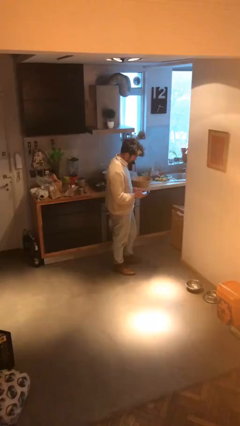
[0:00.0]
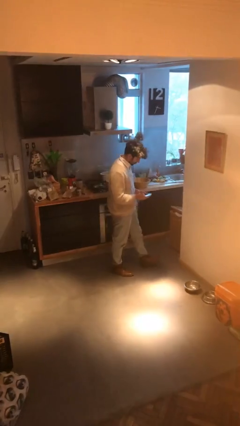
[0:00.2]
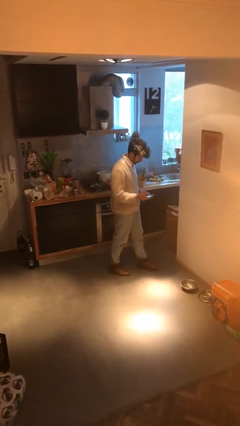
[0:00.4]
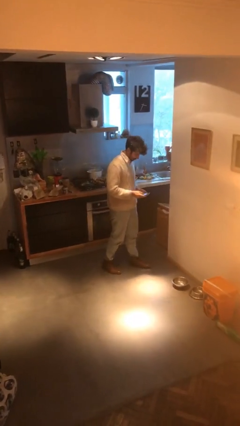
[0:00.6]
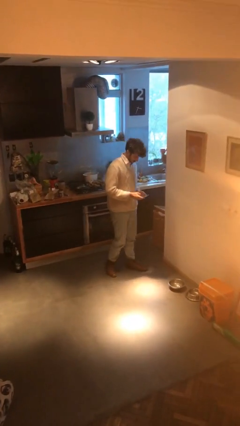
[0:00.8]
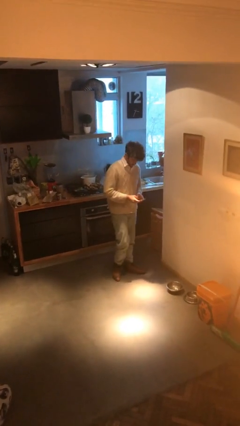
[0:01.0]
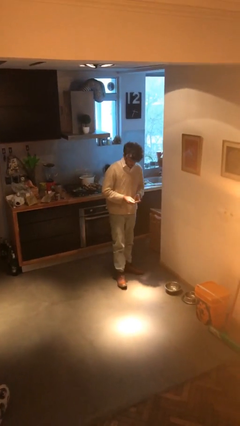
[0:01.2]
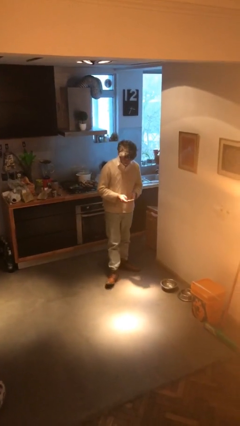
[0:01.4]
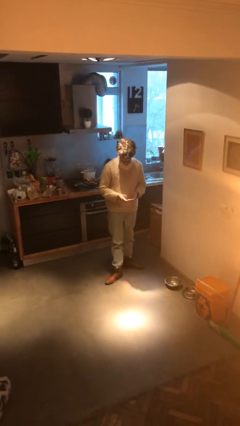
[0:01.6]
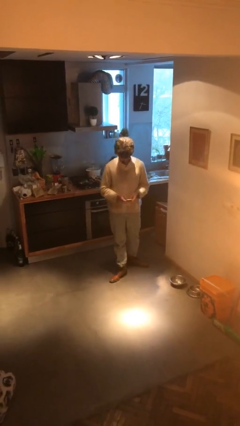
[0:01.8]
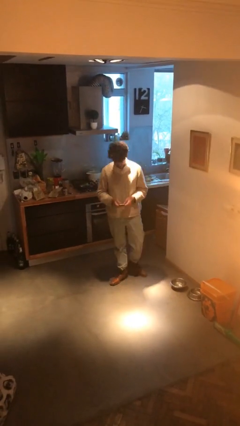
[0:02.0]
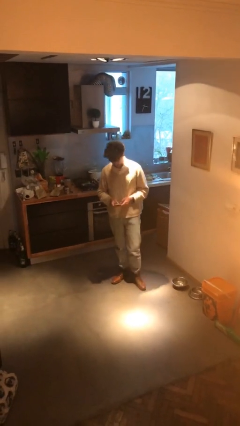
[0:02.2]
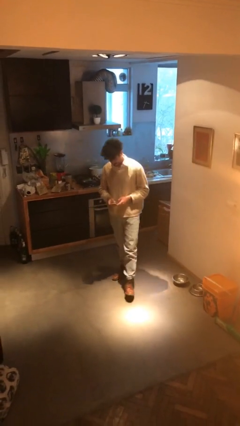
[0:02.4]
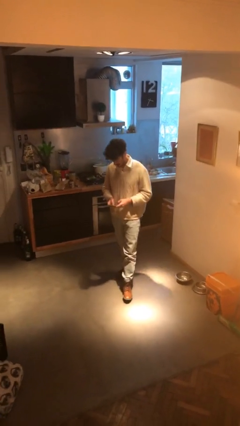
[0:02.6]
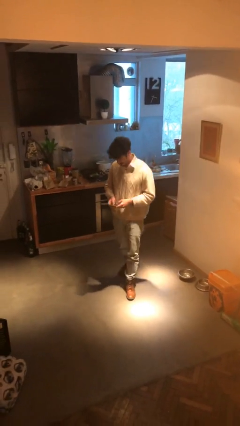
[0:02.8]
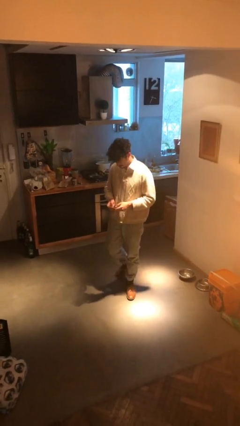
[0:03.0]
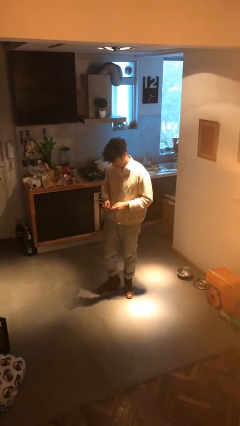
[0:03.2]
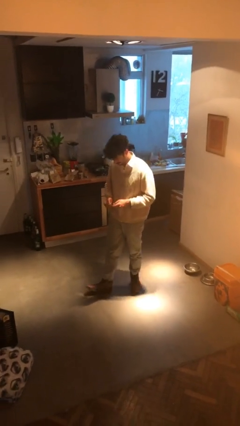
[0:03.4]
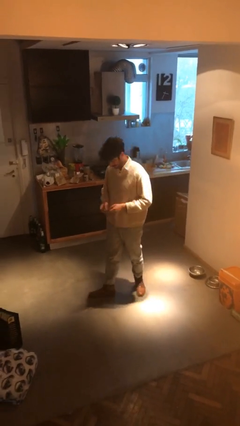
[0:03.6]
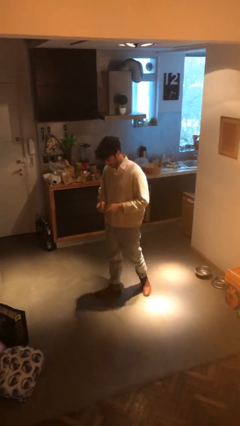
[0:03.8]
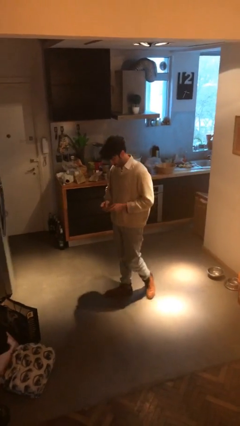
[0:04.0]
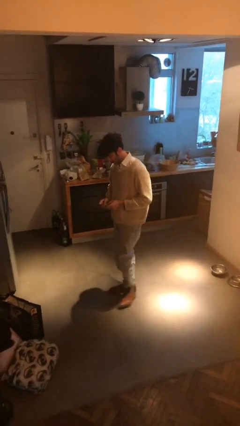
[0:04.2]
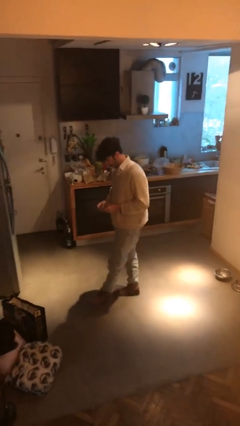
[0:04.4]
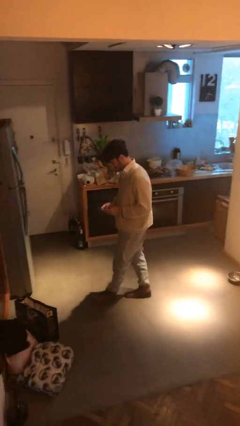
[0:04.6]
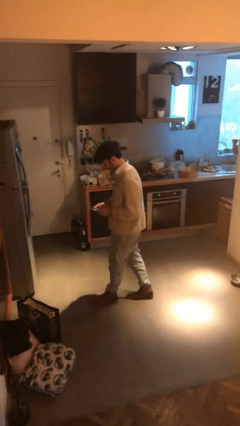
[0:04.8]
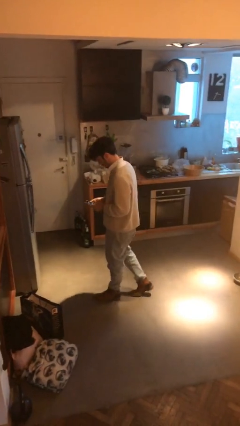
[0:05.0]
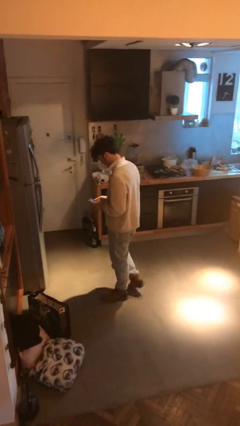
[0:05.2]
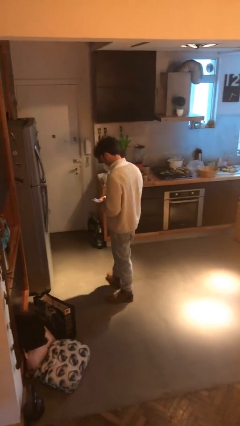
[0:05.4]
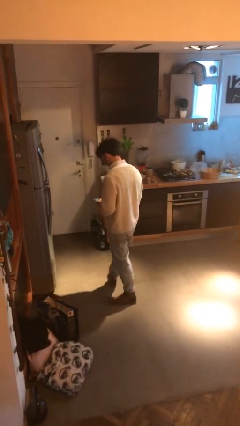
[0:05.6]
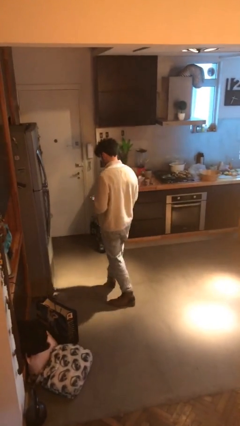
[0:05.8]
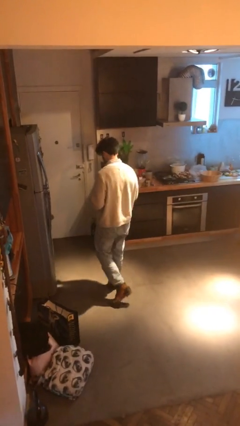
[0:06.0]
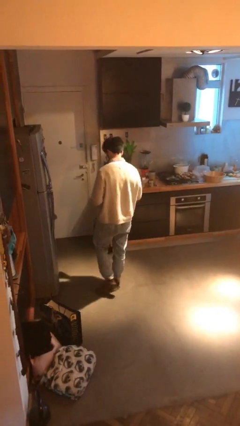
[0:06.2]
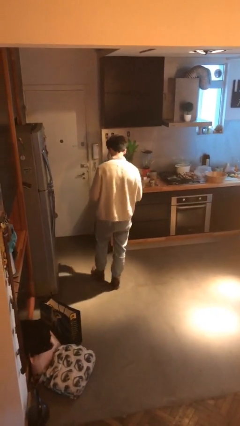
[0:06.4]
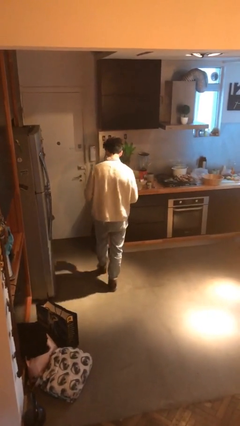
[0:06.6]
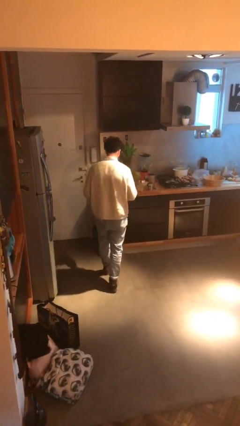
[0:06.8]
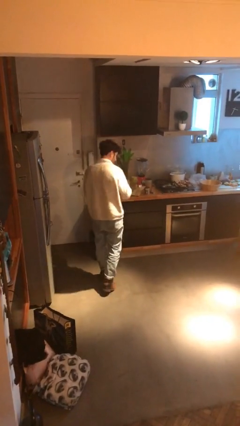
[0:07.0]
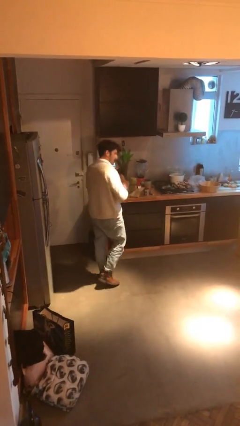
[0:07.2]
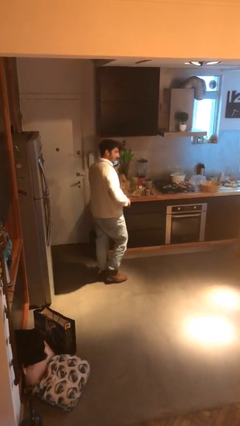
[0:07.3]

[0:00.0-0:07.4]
person texts on phone

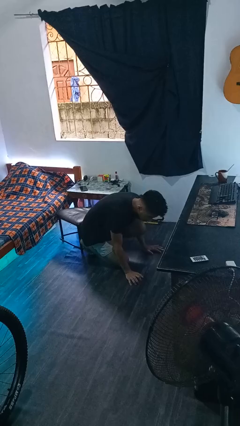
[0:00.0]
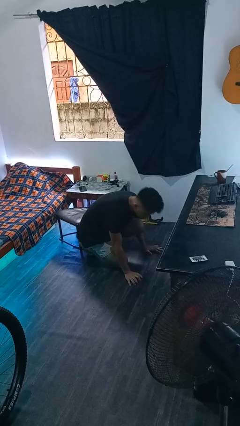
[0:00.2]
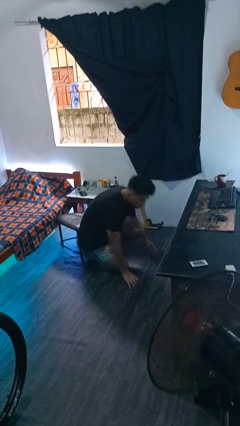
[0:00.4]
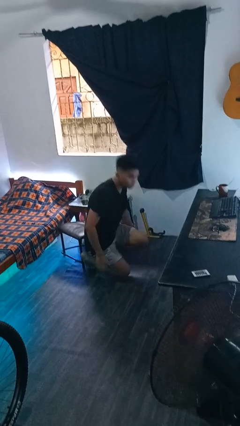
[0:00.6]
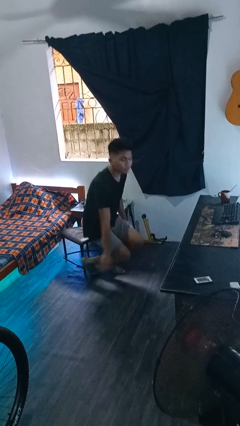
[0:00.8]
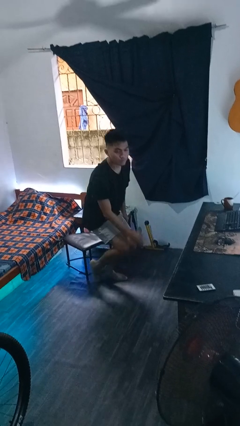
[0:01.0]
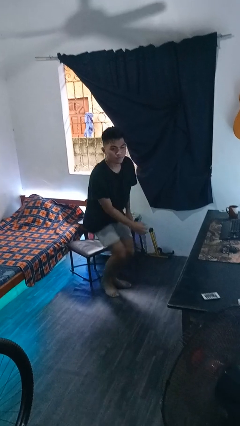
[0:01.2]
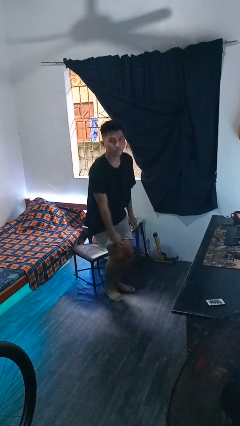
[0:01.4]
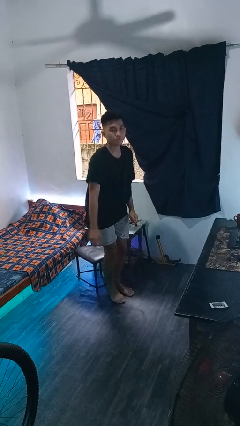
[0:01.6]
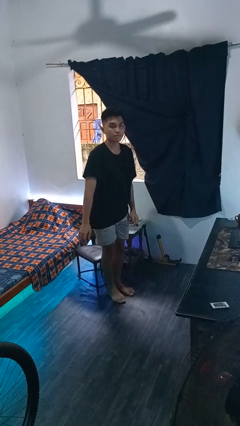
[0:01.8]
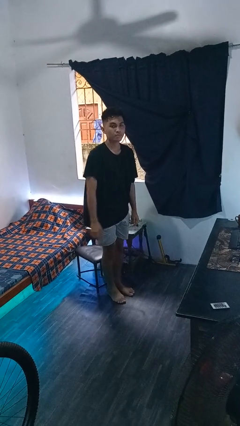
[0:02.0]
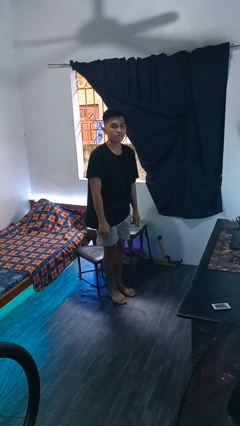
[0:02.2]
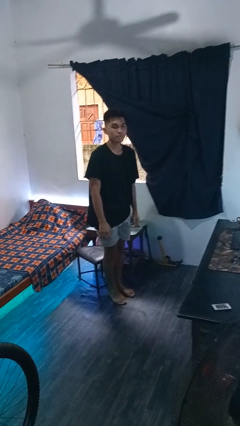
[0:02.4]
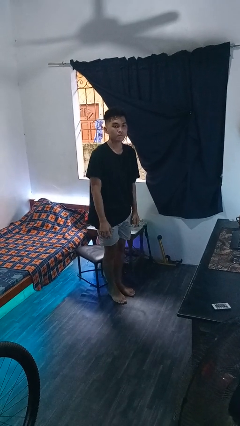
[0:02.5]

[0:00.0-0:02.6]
person stands up from floor

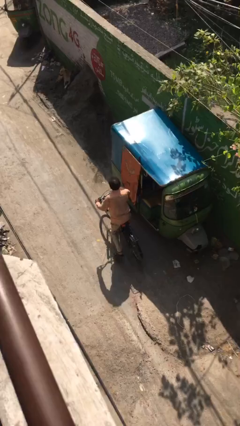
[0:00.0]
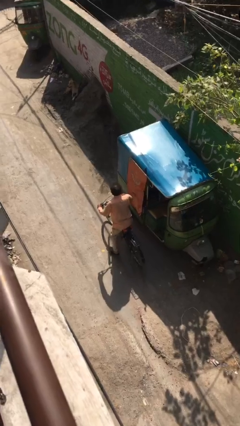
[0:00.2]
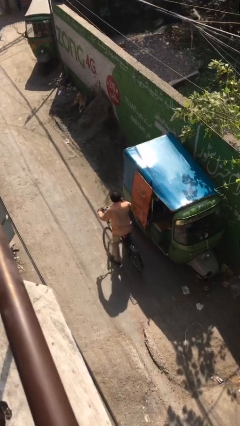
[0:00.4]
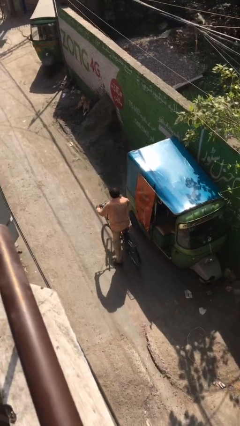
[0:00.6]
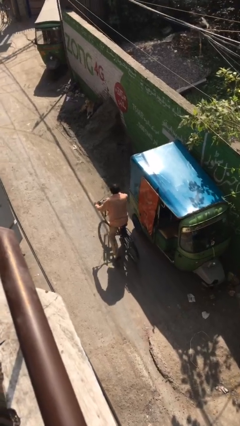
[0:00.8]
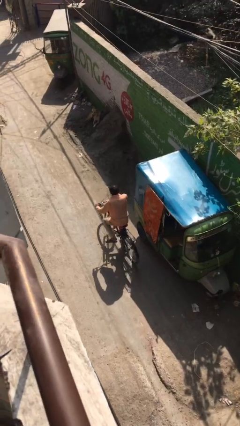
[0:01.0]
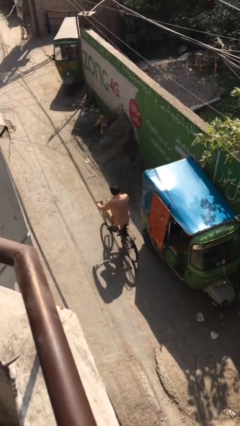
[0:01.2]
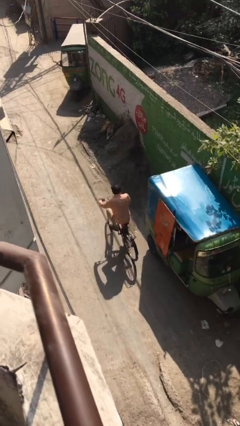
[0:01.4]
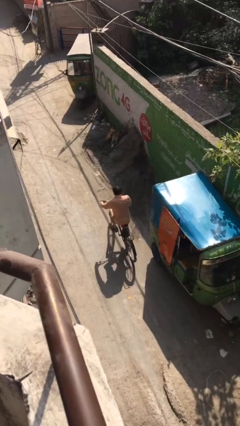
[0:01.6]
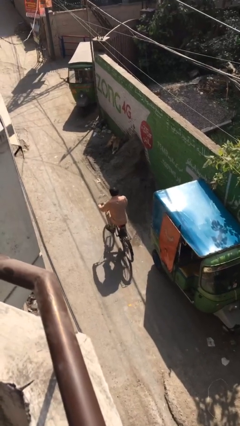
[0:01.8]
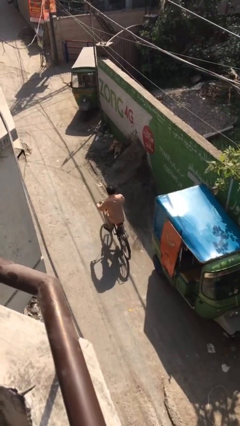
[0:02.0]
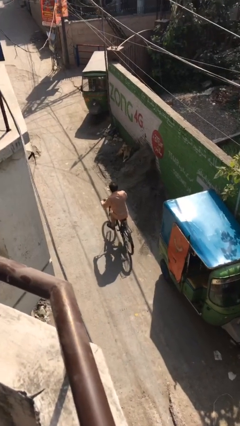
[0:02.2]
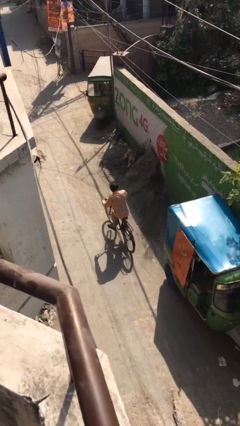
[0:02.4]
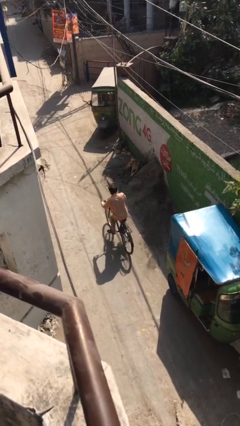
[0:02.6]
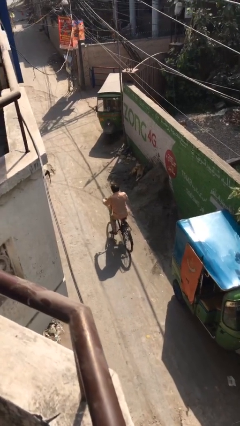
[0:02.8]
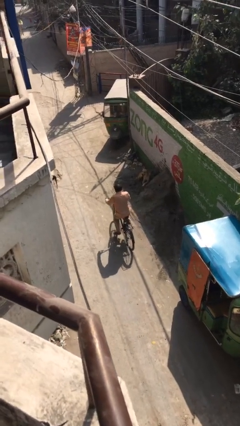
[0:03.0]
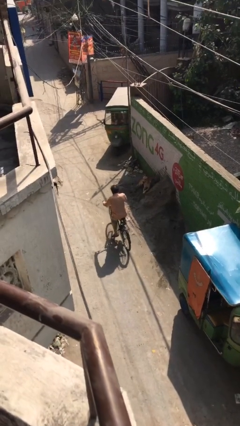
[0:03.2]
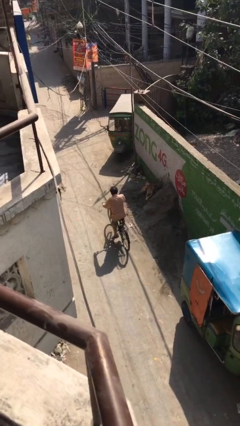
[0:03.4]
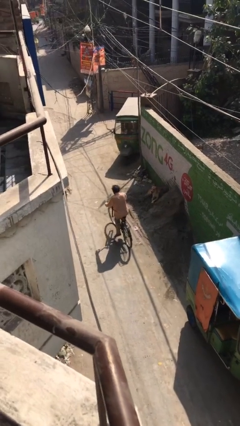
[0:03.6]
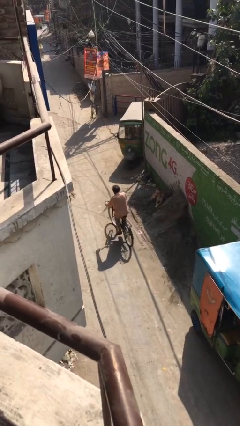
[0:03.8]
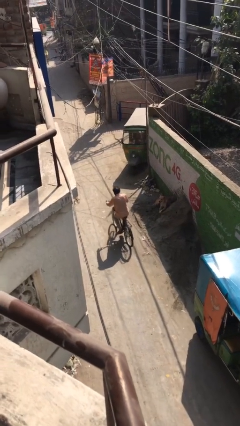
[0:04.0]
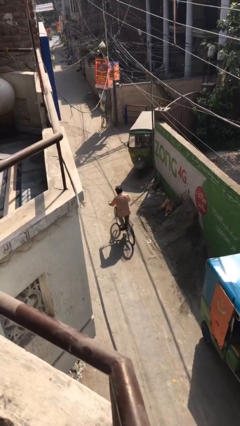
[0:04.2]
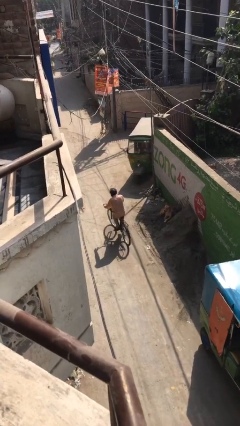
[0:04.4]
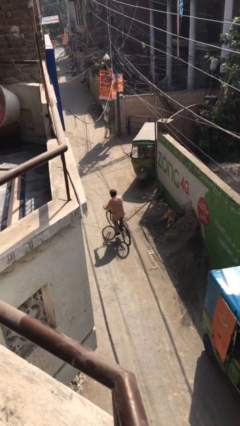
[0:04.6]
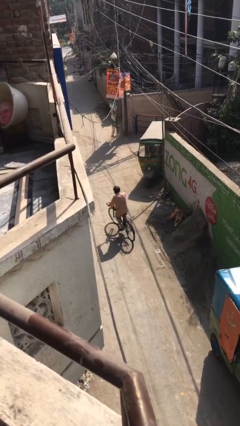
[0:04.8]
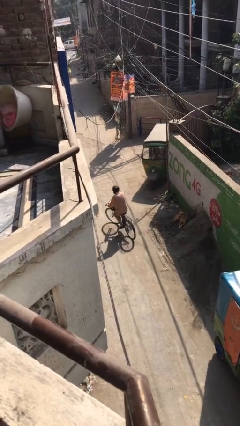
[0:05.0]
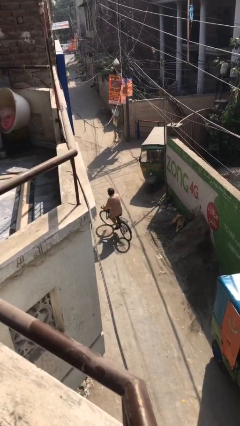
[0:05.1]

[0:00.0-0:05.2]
person rides bicycle

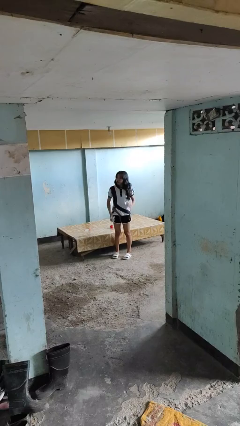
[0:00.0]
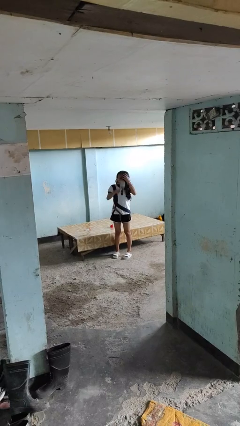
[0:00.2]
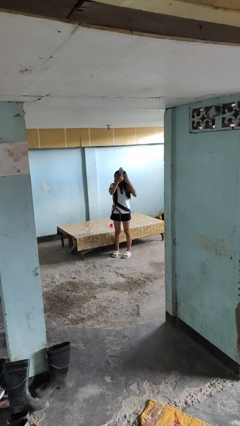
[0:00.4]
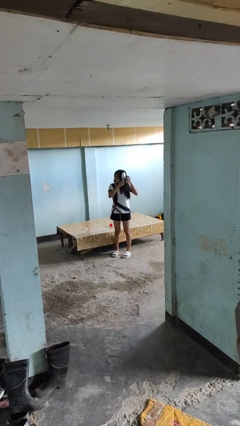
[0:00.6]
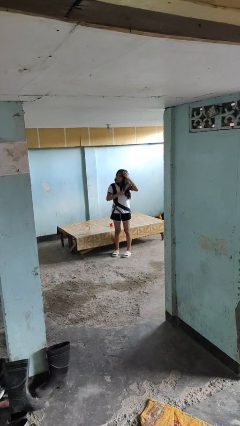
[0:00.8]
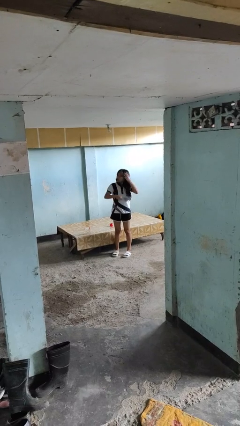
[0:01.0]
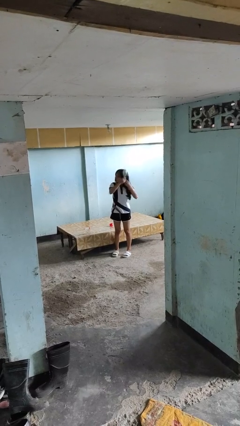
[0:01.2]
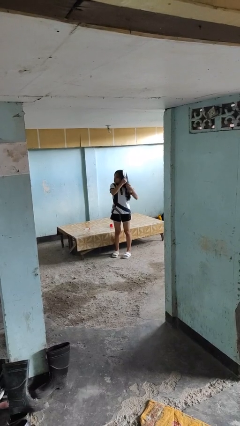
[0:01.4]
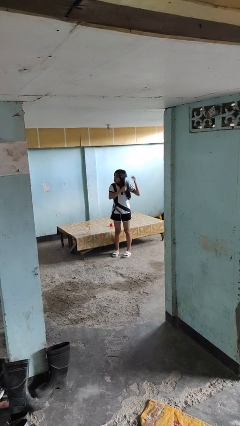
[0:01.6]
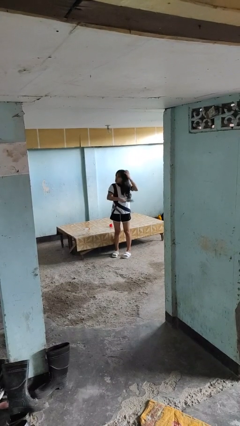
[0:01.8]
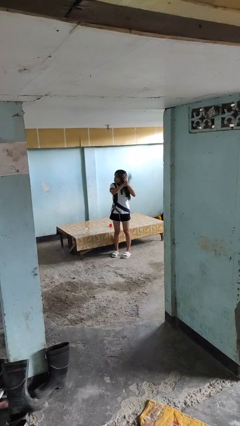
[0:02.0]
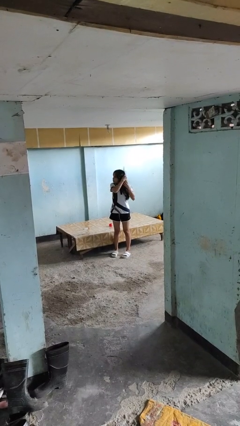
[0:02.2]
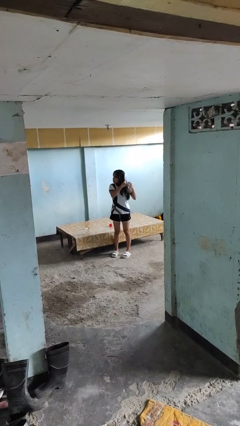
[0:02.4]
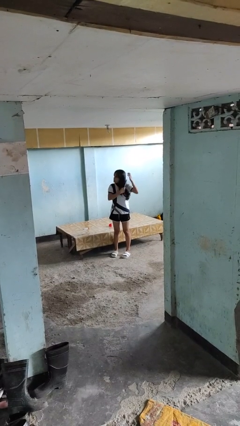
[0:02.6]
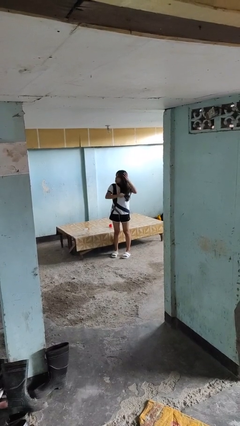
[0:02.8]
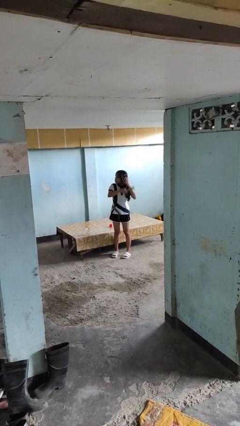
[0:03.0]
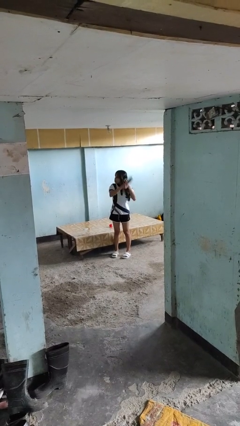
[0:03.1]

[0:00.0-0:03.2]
person brushes hair
